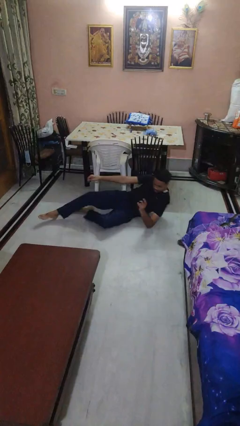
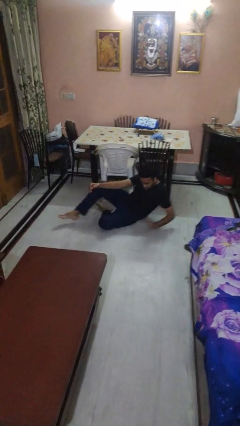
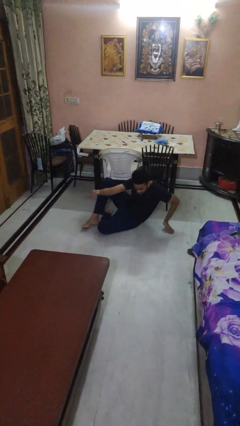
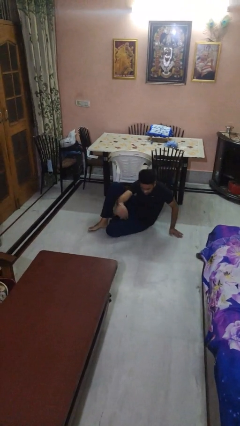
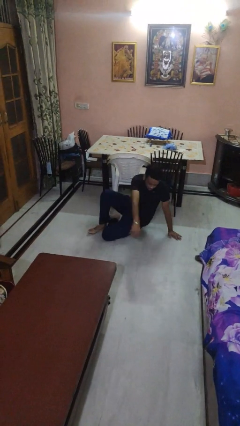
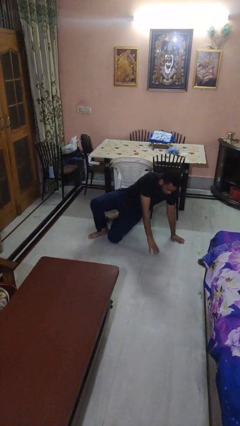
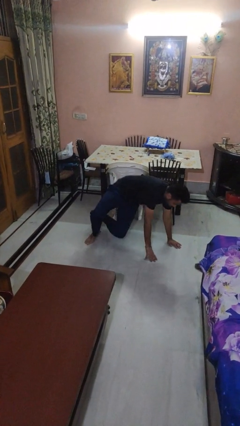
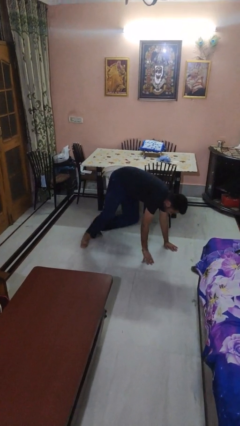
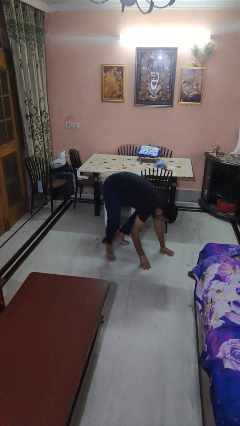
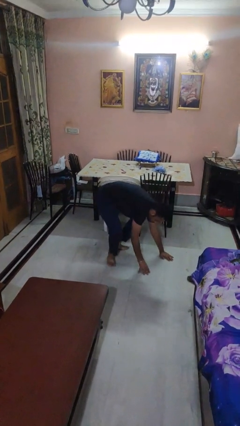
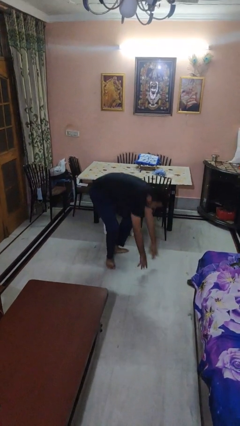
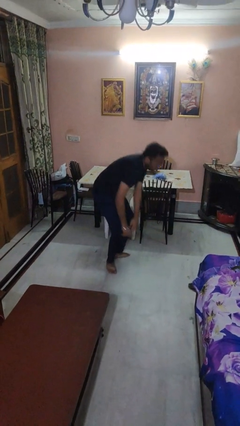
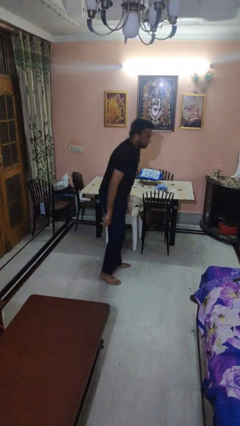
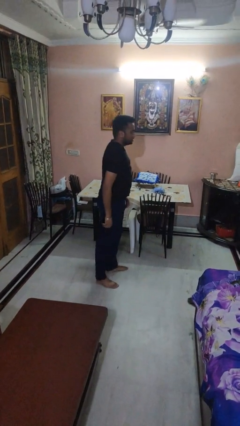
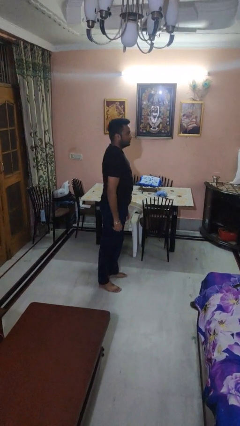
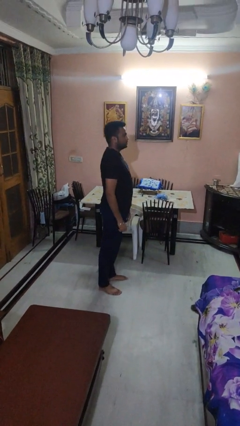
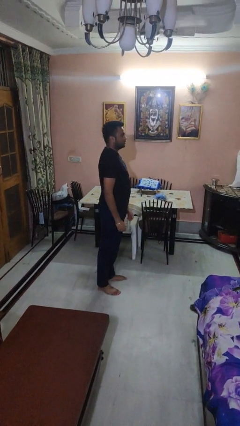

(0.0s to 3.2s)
person stands up from floor

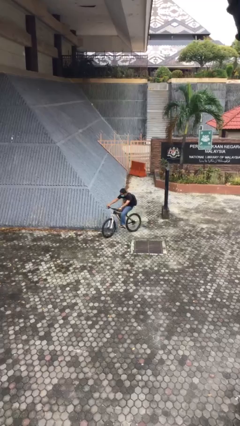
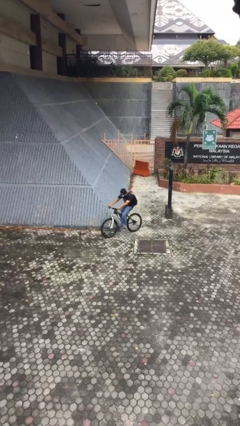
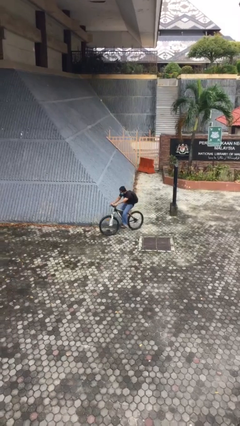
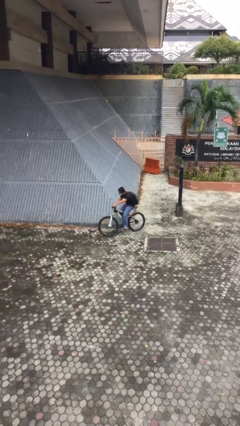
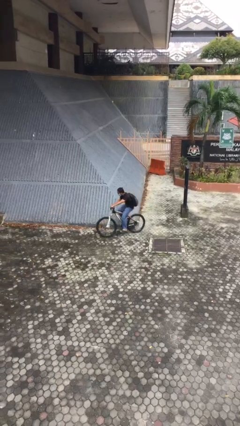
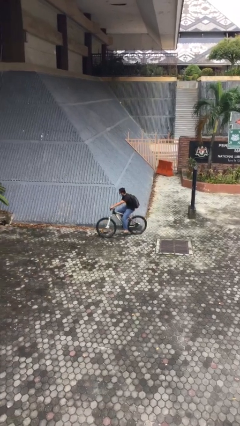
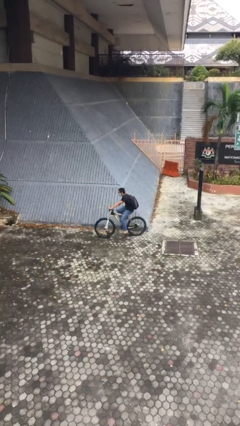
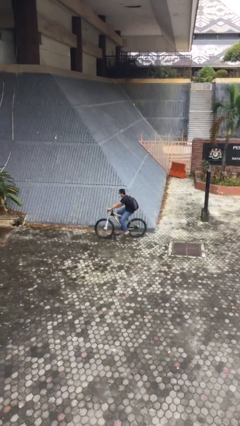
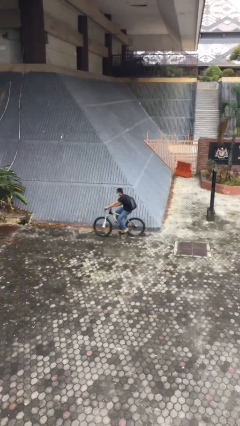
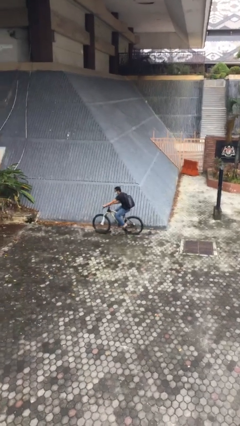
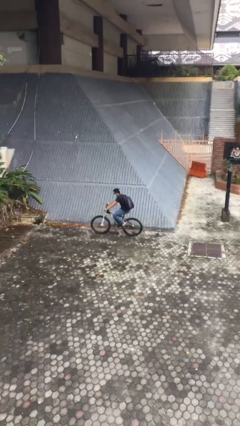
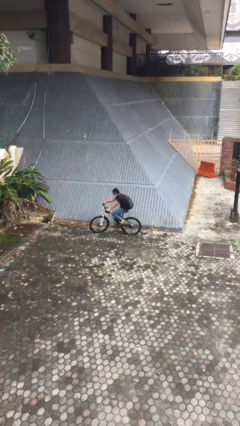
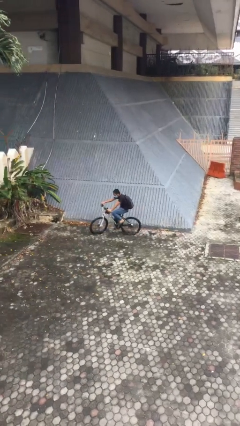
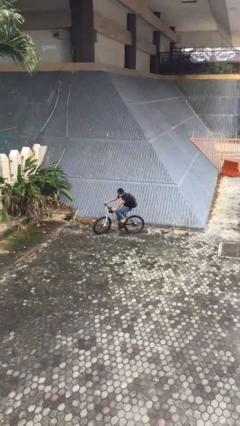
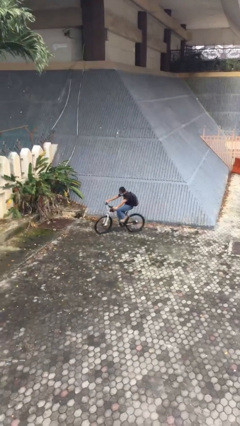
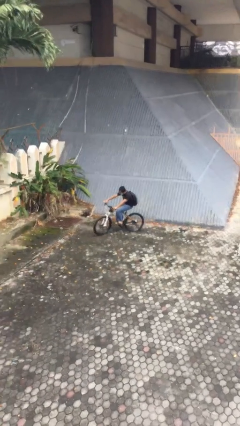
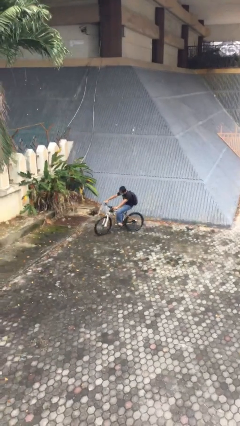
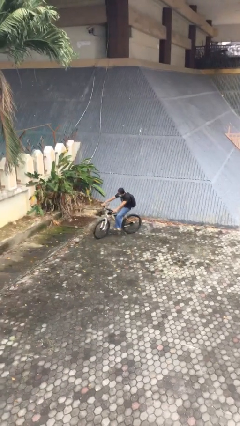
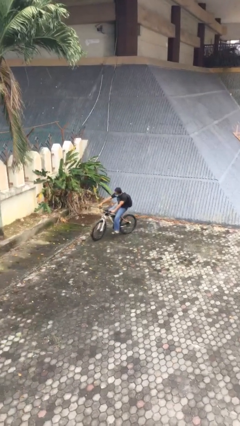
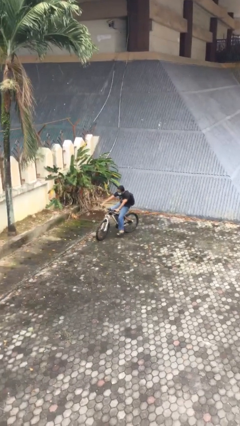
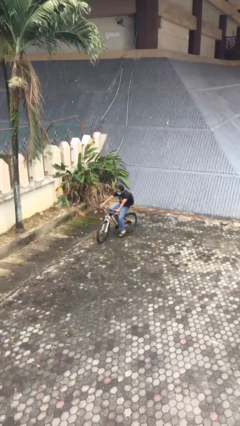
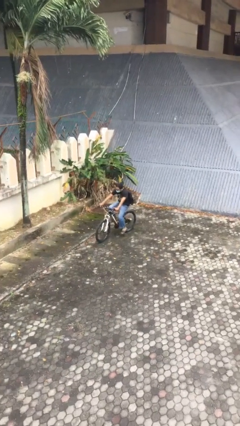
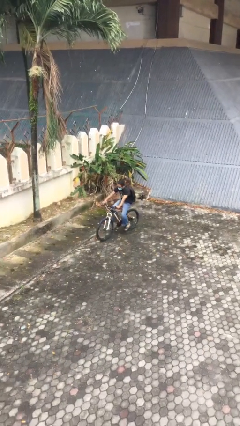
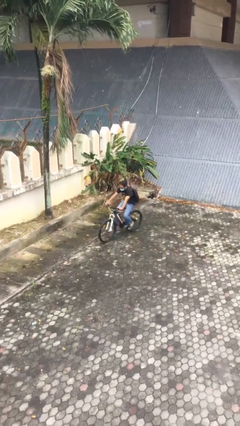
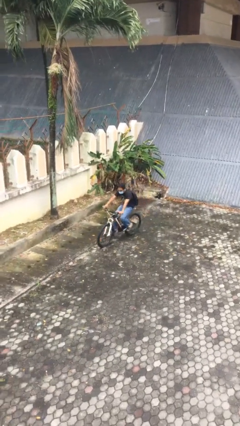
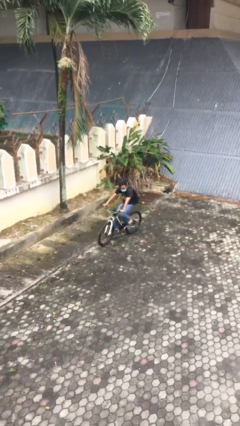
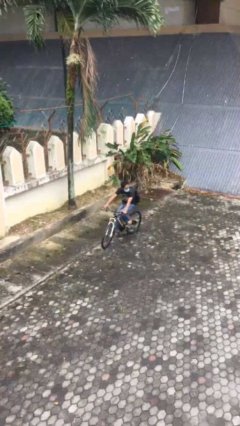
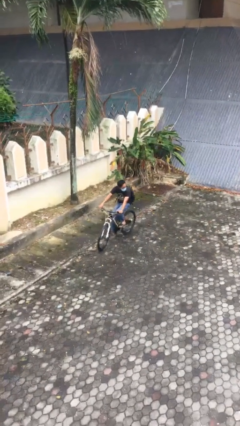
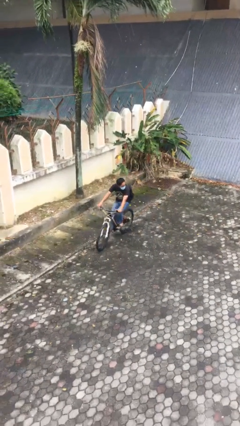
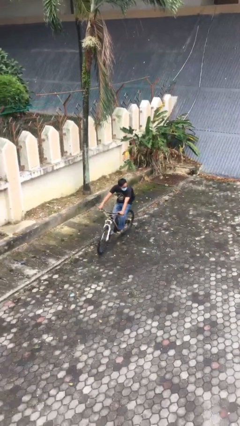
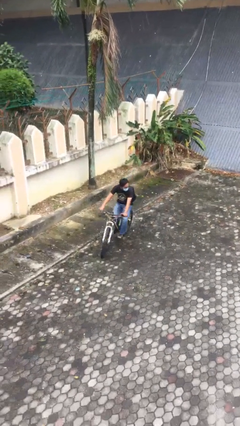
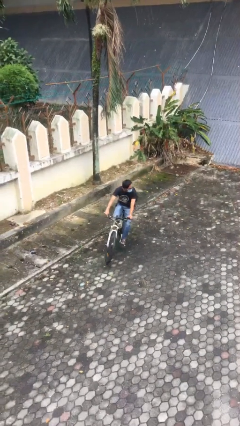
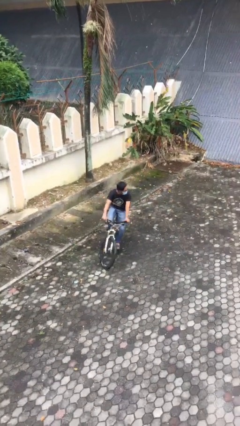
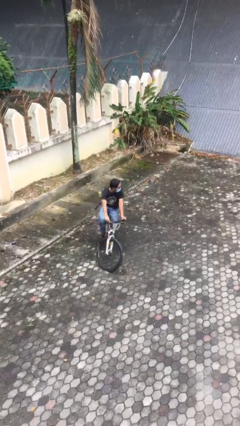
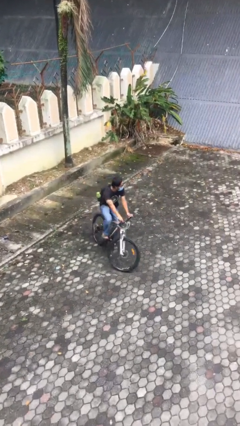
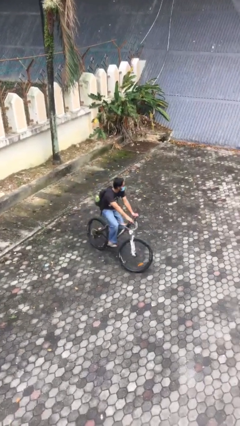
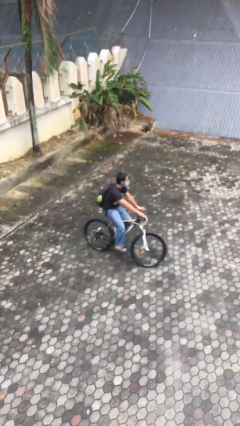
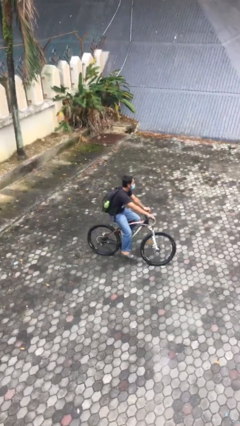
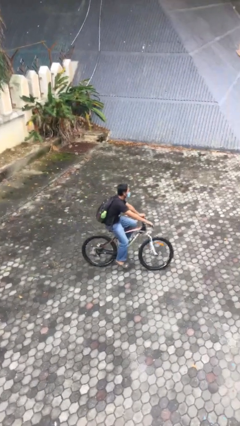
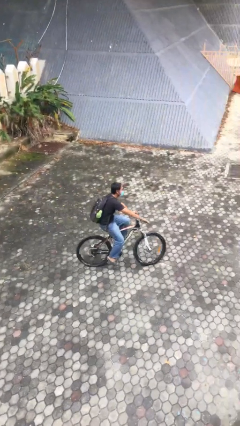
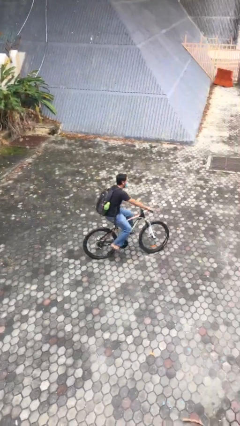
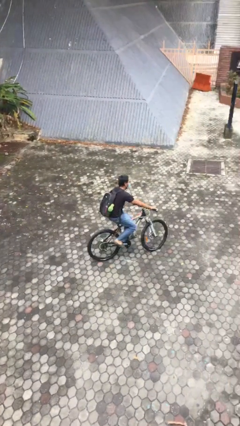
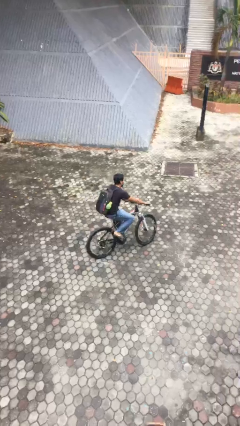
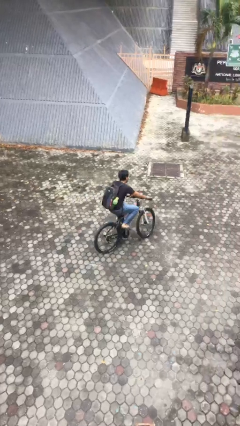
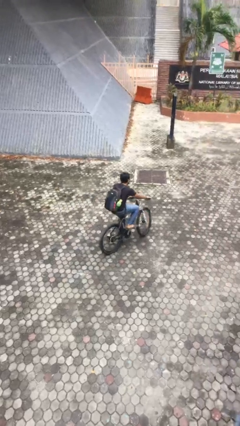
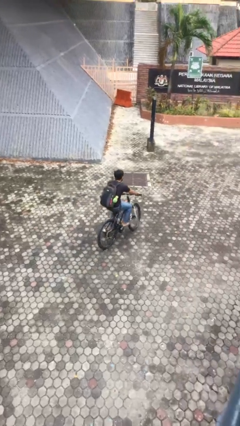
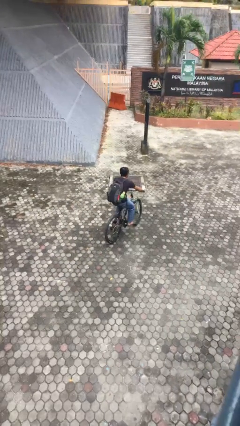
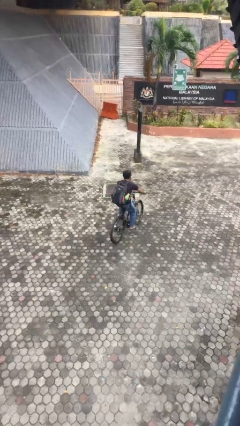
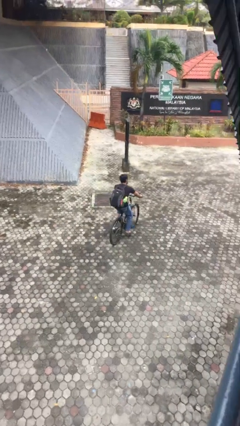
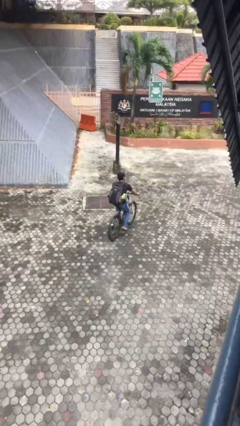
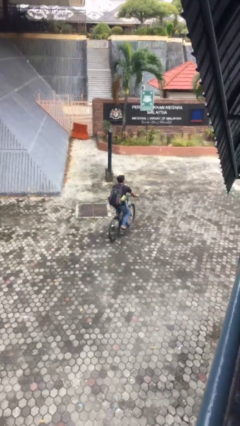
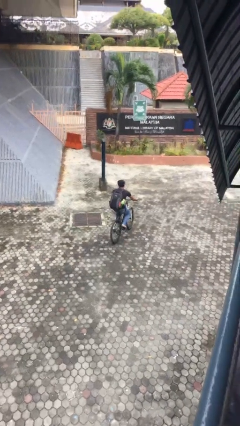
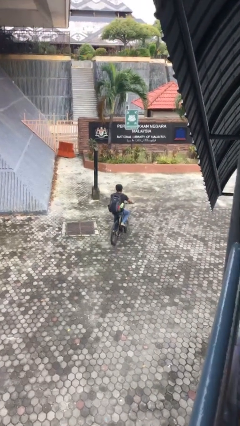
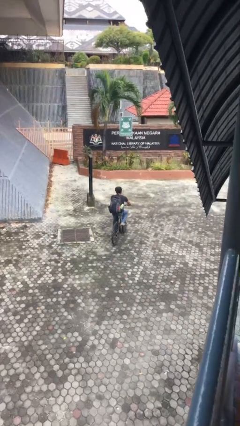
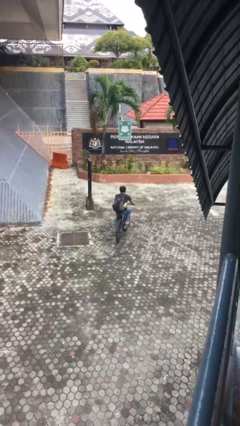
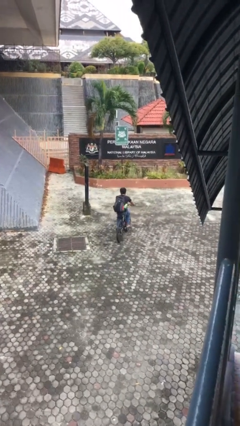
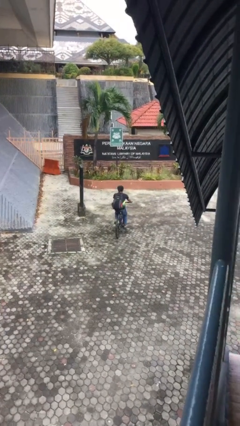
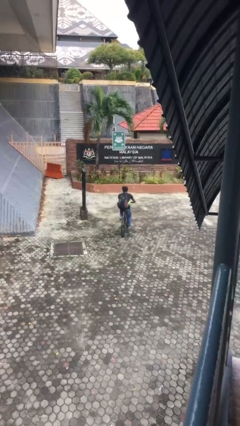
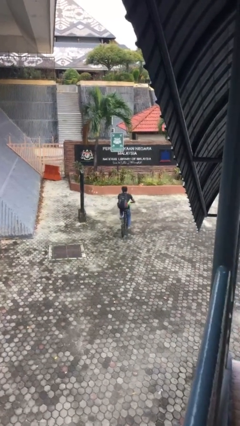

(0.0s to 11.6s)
person rides bicycle

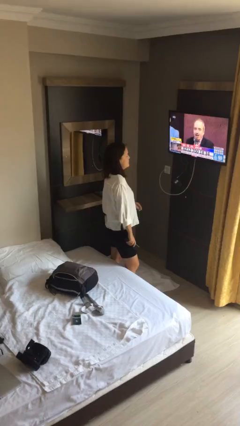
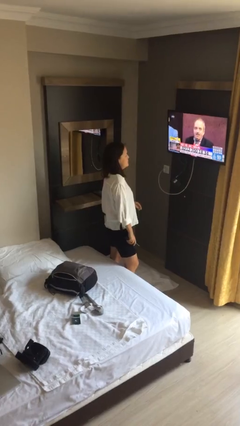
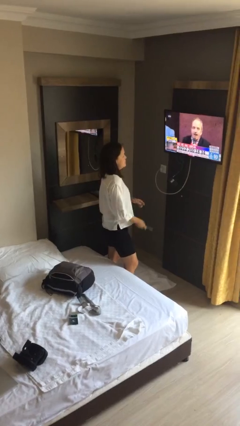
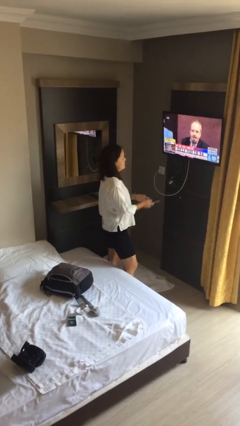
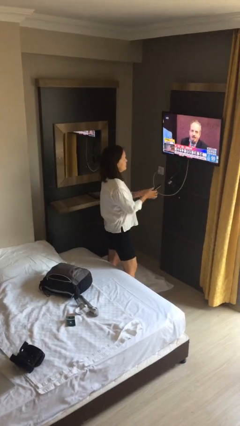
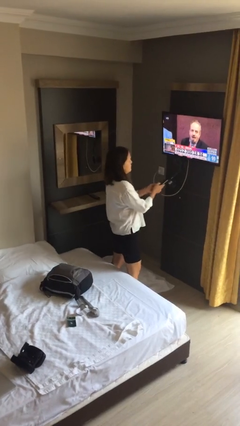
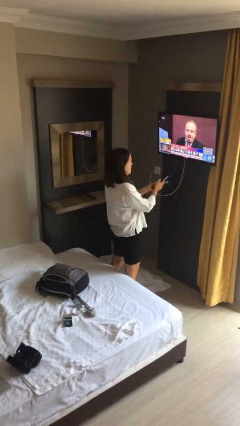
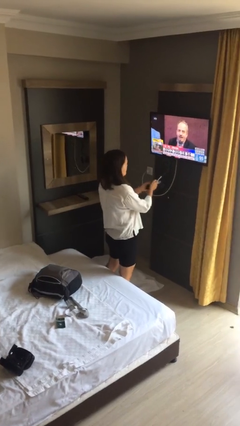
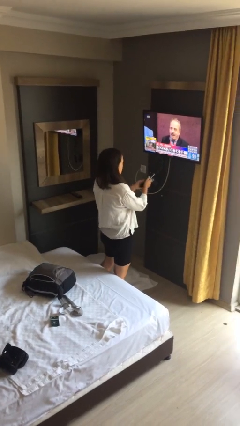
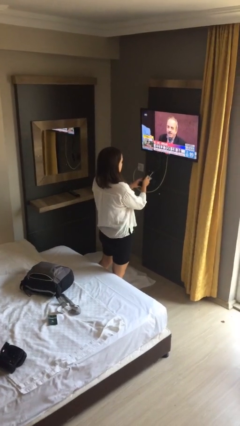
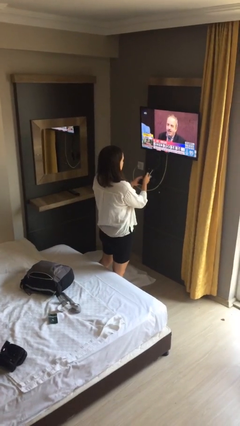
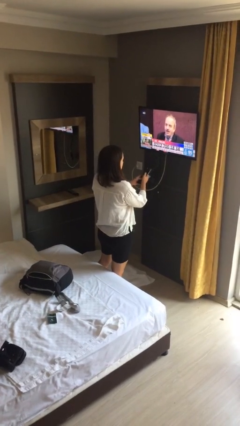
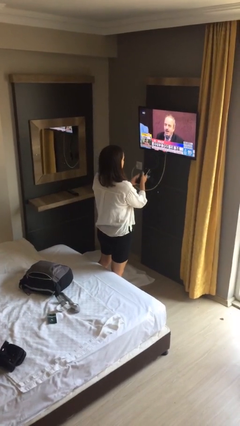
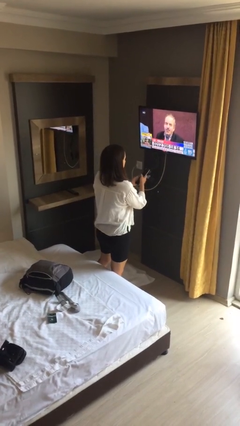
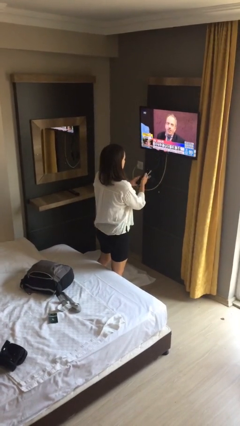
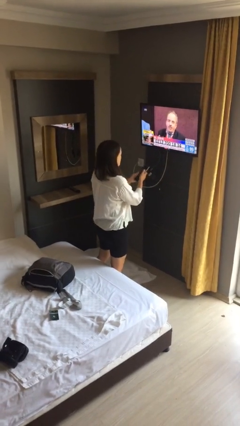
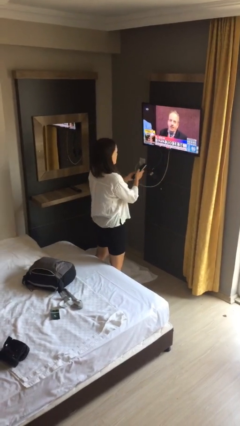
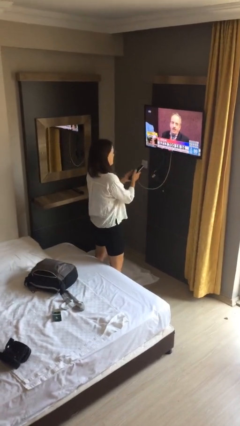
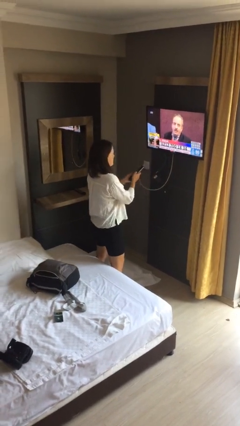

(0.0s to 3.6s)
person uses television remote
